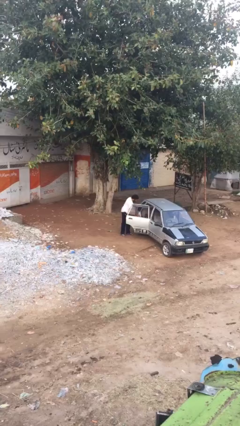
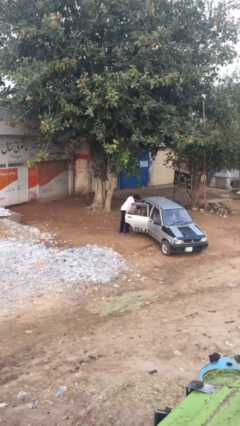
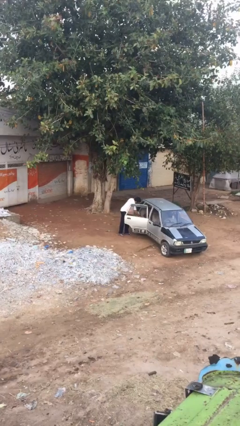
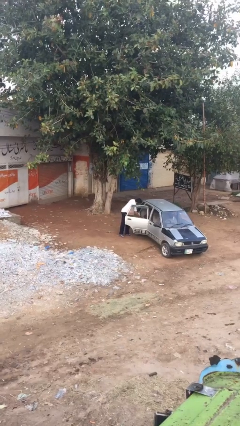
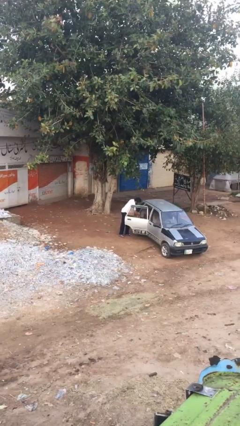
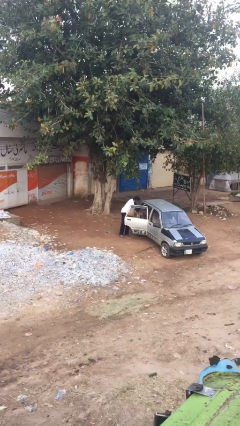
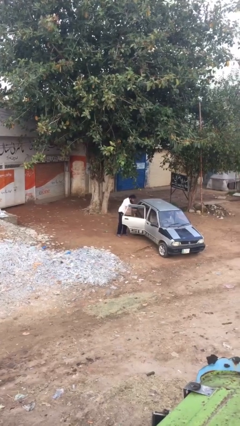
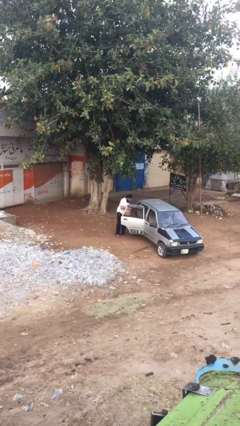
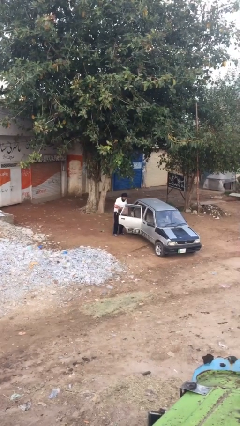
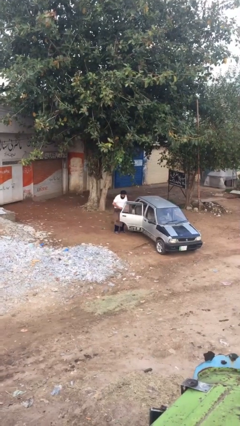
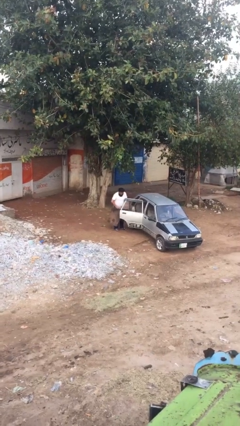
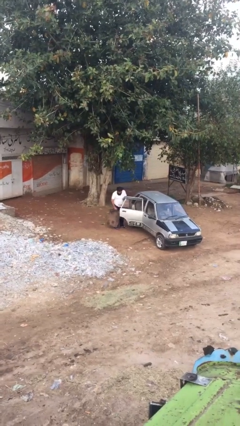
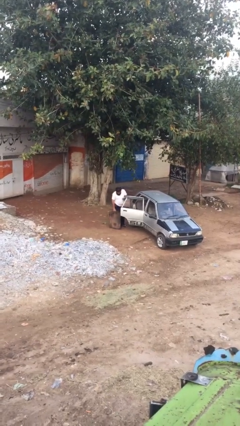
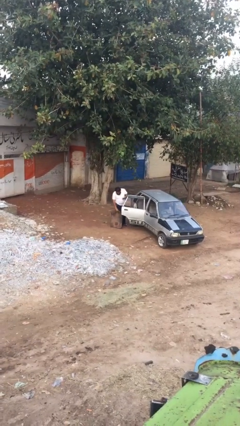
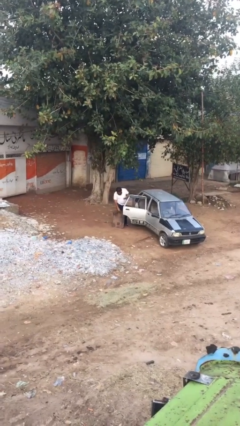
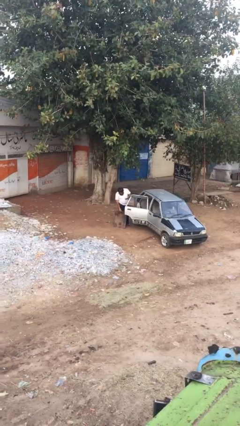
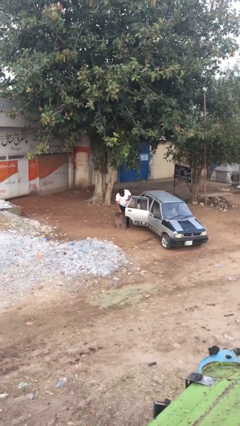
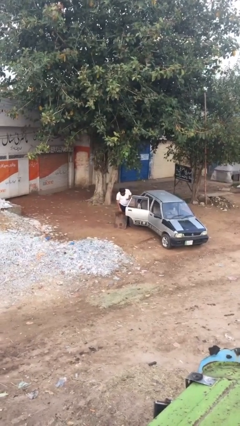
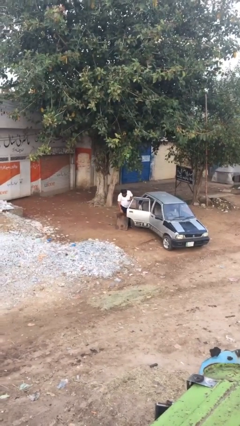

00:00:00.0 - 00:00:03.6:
person unloads car

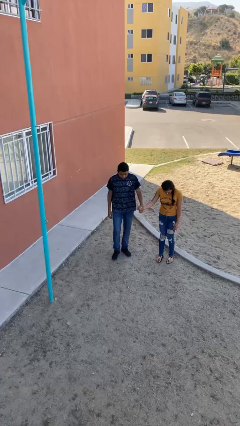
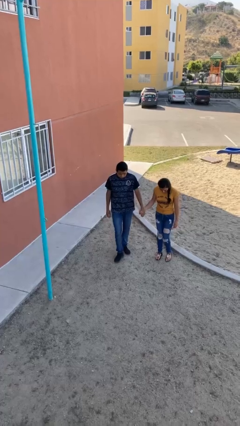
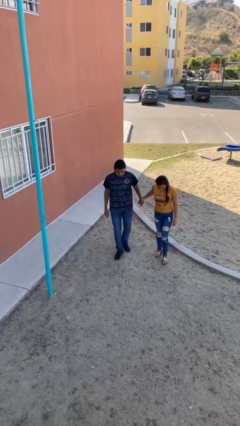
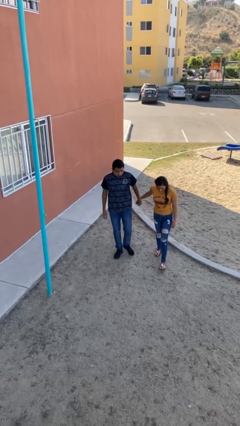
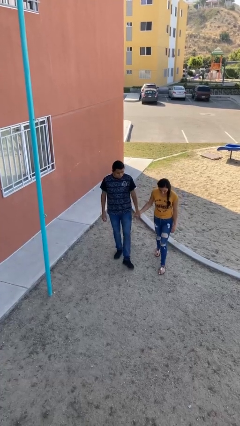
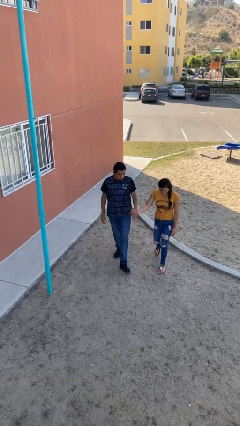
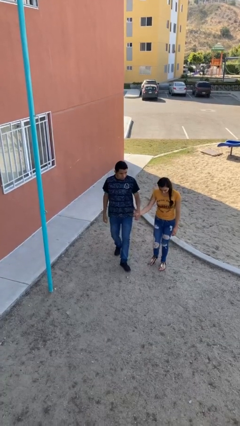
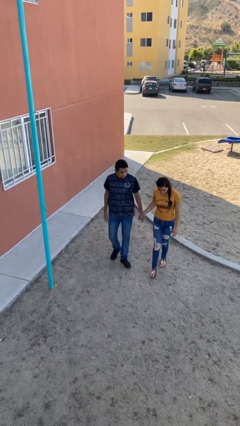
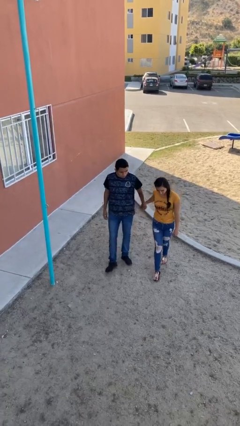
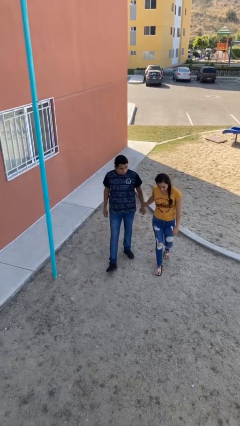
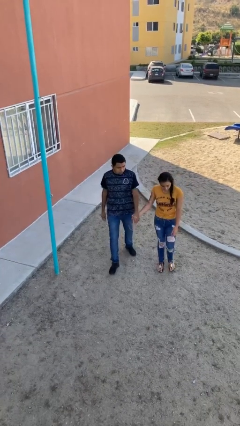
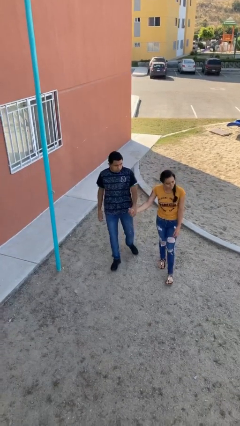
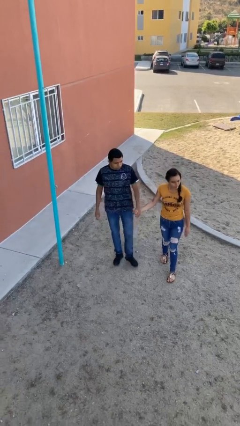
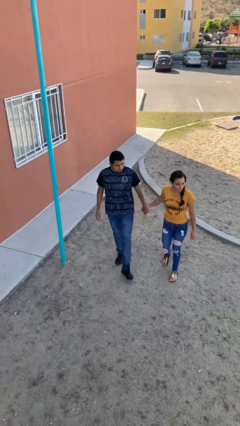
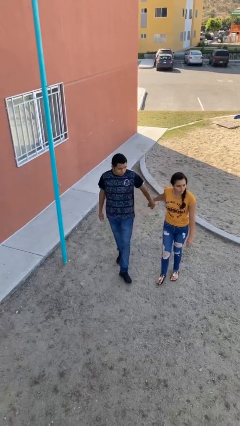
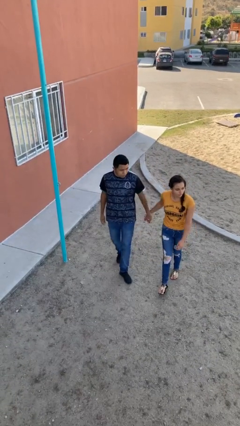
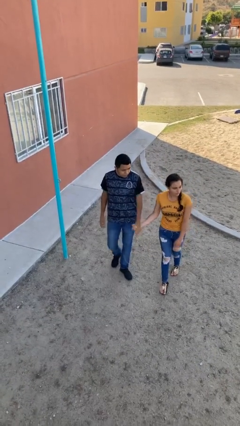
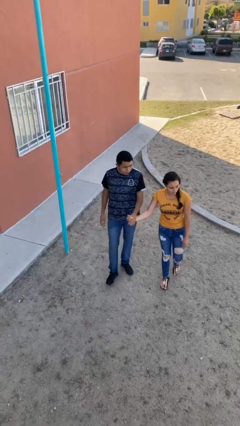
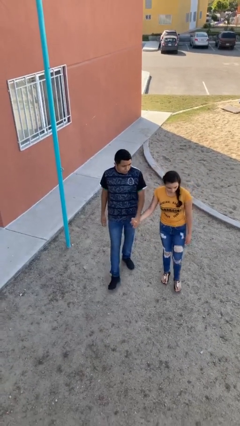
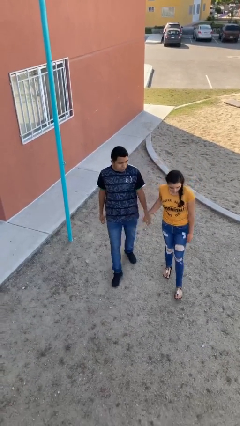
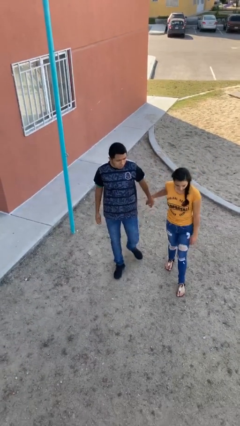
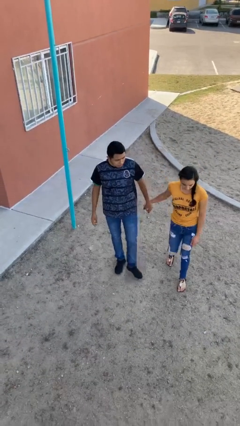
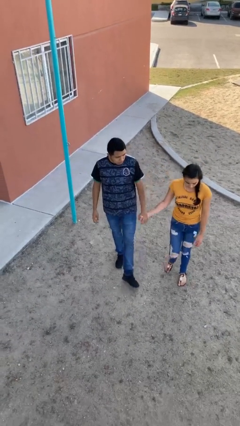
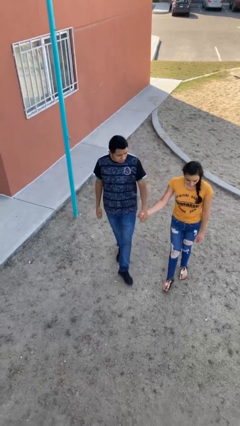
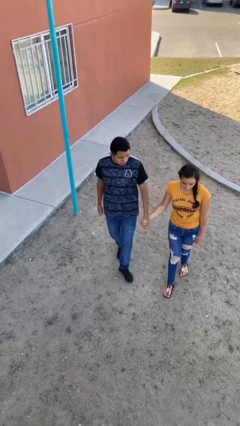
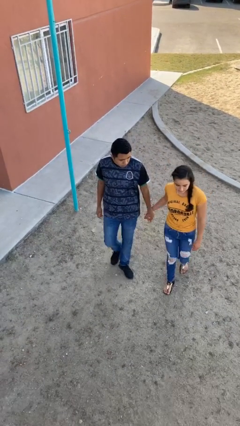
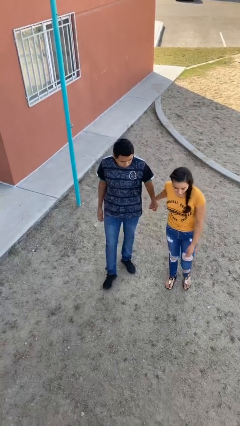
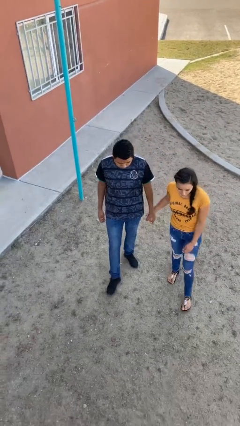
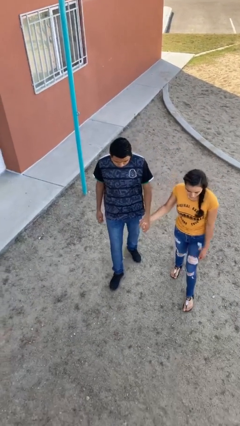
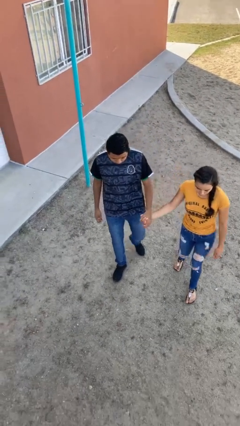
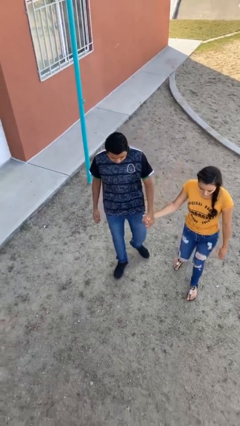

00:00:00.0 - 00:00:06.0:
person holds hand

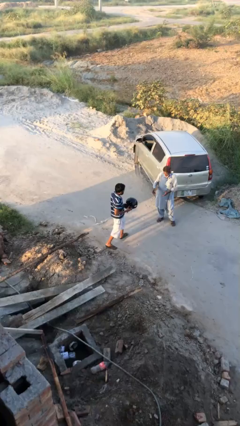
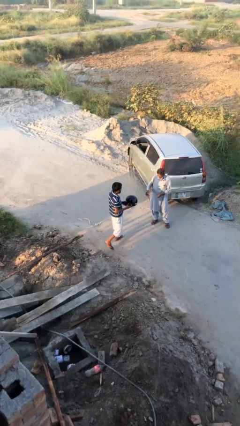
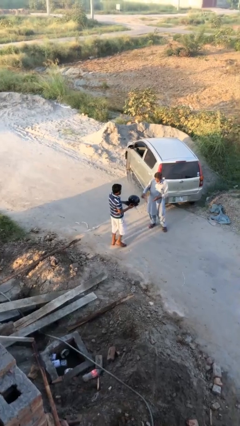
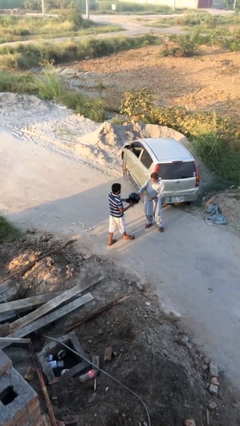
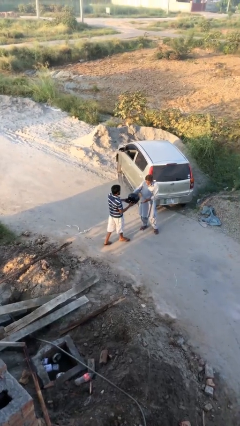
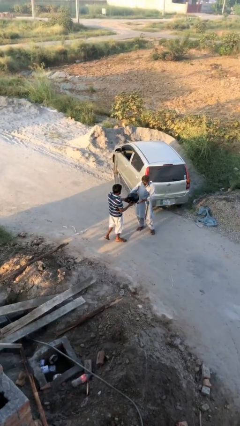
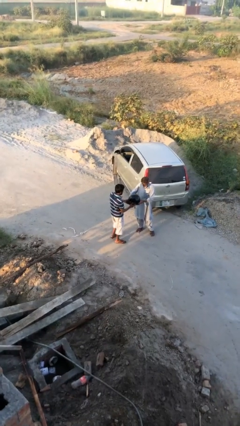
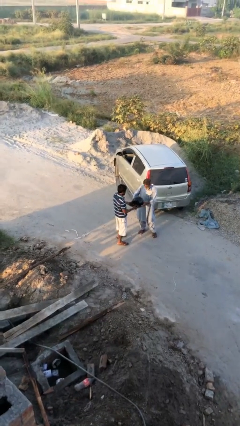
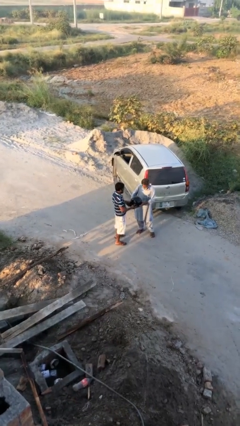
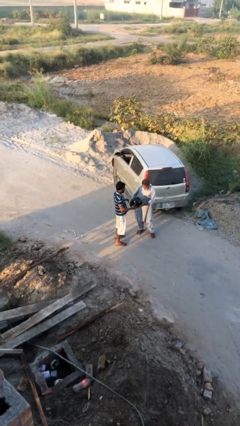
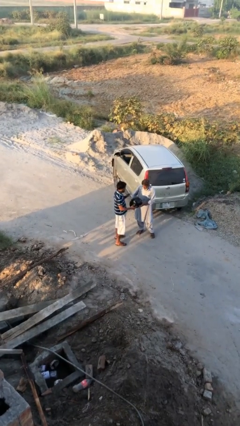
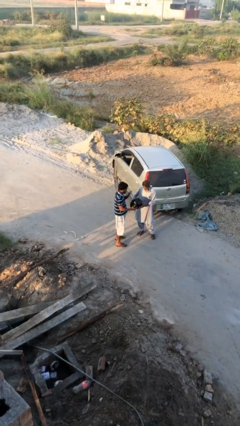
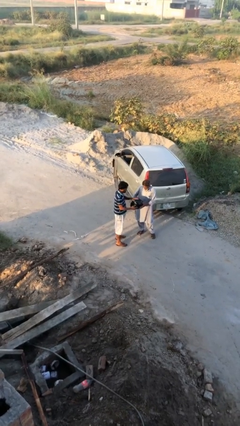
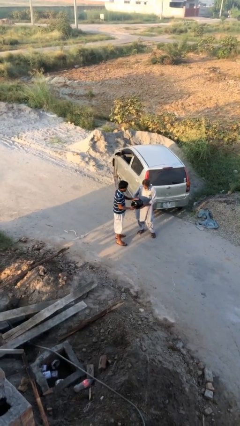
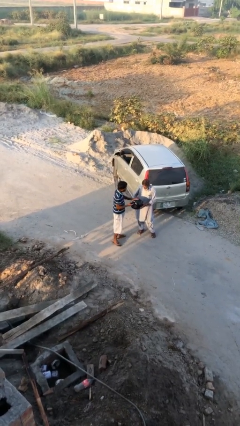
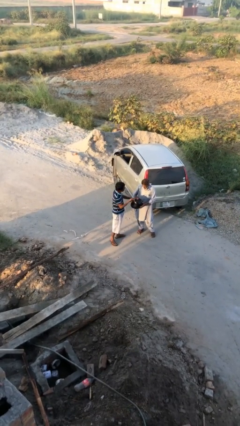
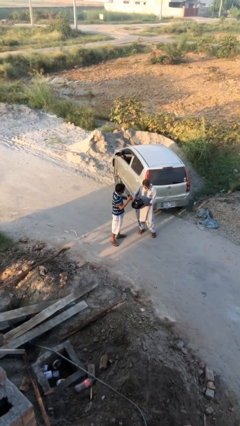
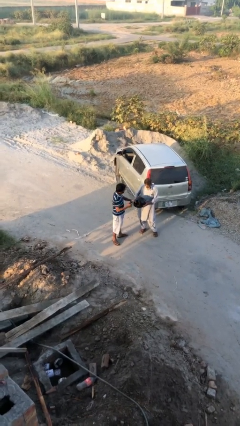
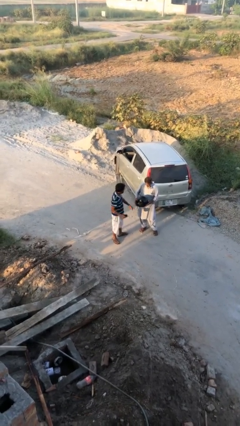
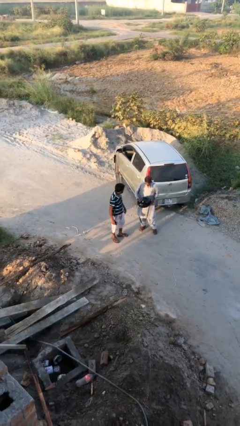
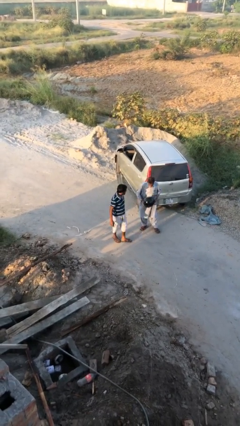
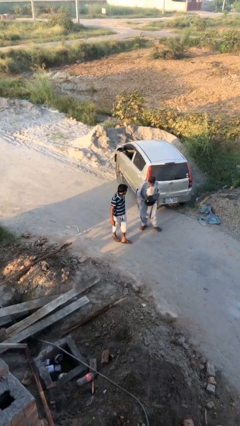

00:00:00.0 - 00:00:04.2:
person transfers object to person

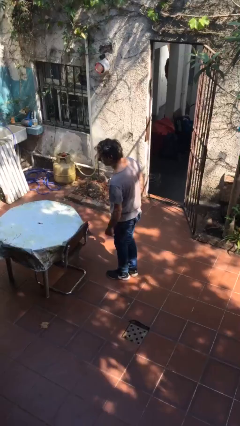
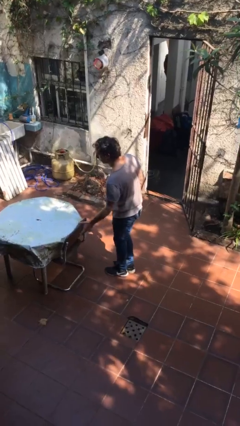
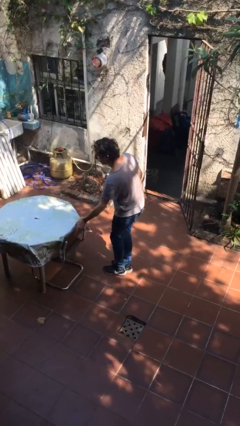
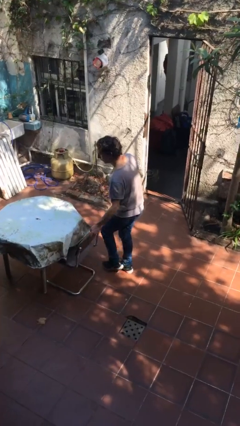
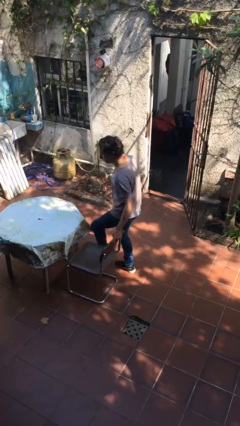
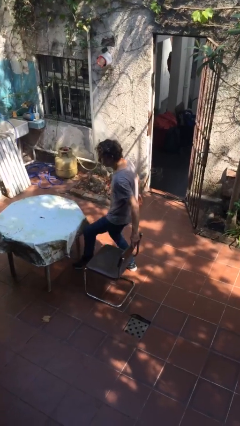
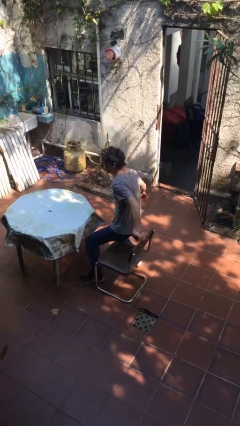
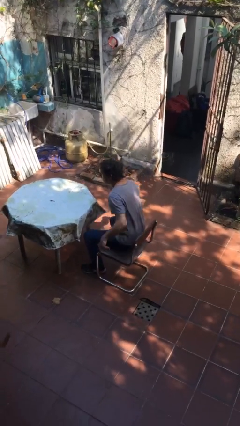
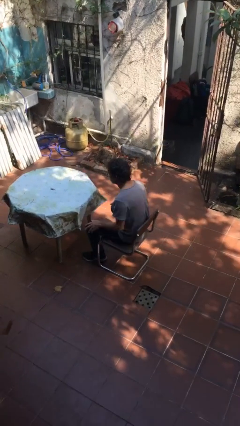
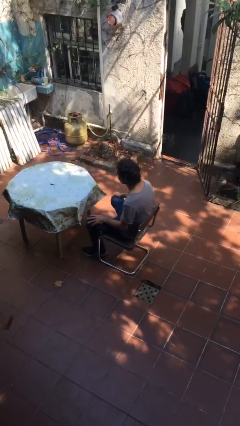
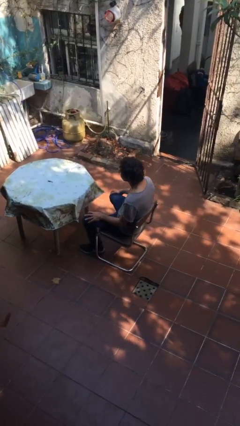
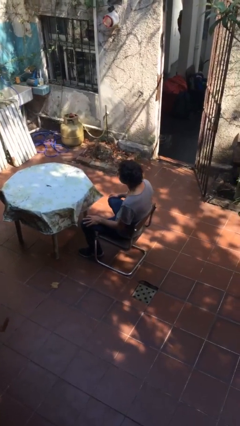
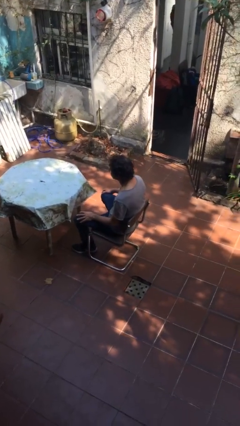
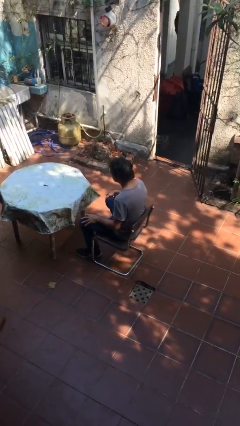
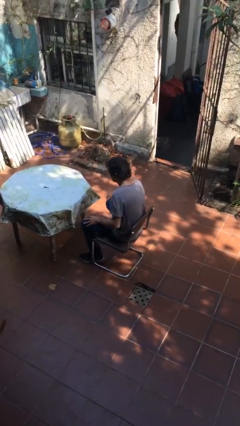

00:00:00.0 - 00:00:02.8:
person sits down

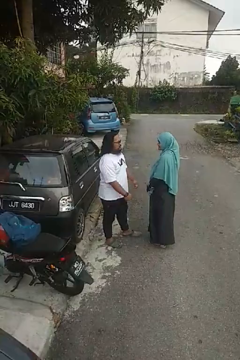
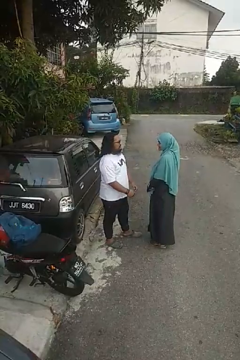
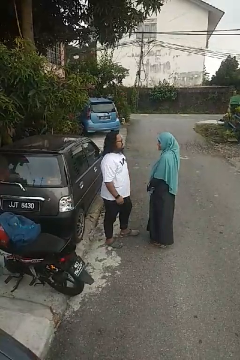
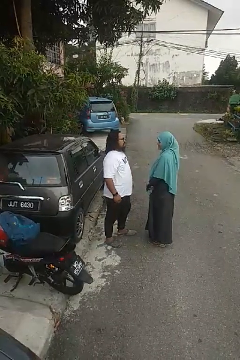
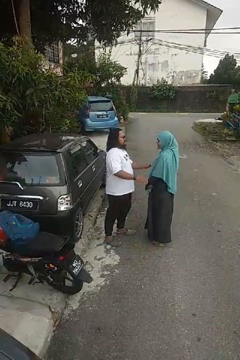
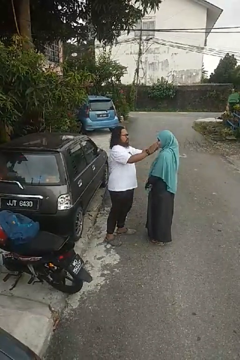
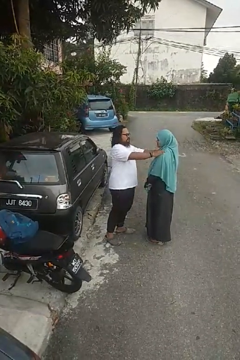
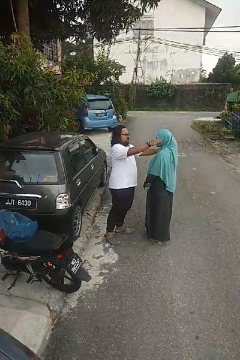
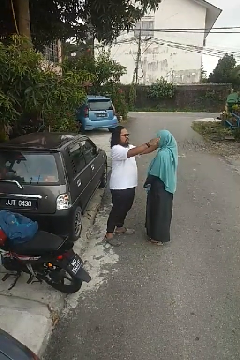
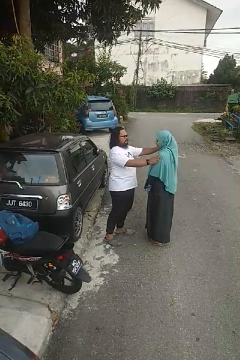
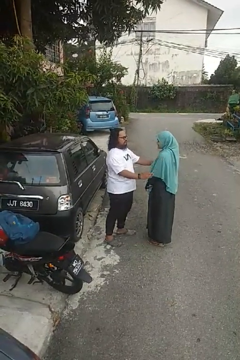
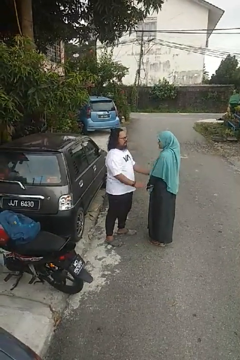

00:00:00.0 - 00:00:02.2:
person pounds shoulders of person
